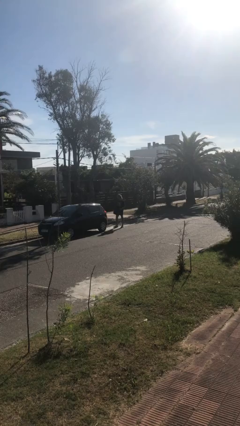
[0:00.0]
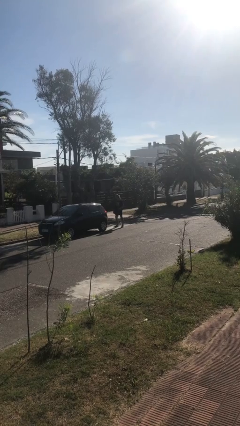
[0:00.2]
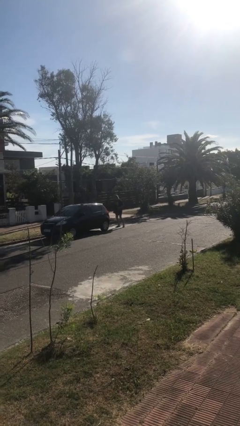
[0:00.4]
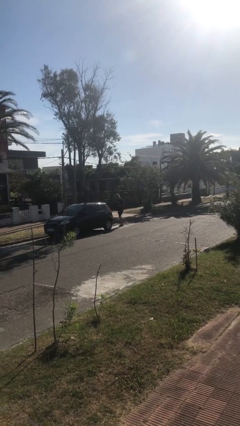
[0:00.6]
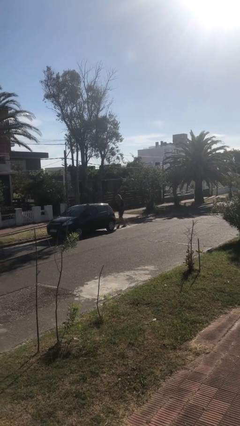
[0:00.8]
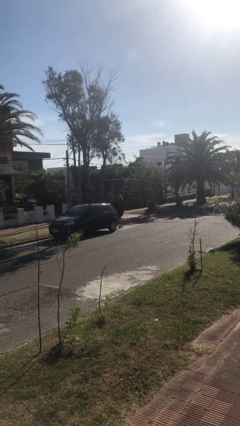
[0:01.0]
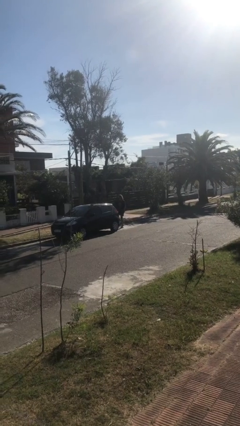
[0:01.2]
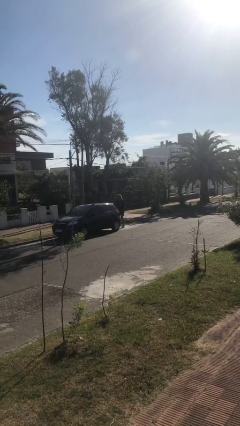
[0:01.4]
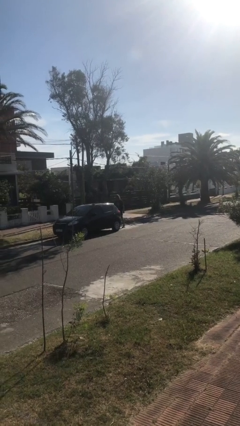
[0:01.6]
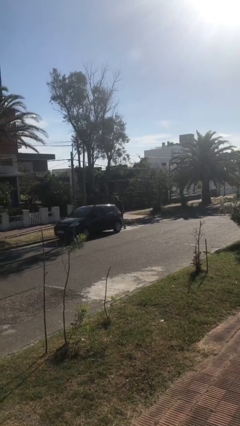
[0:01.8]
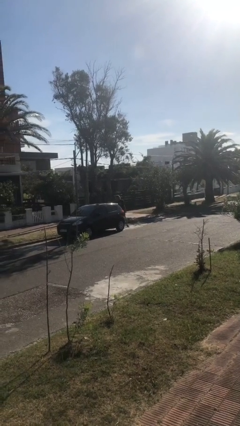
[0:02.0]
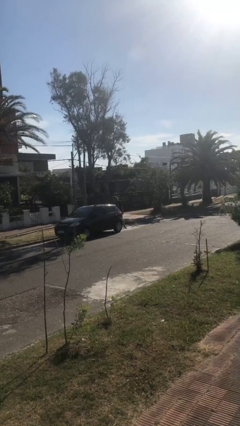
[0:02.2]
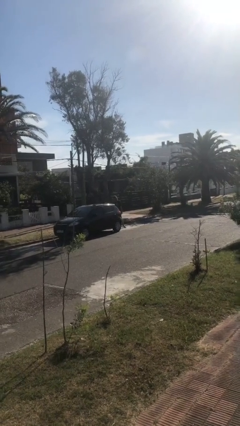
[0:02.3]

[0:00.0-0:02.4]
person loads car

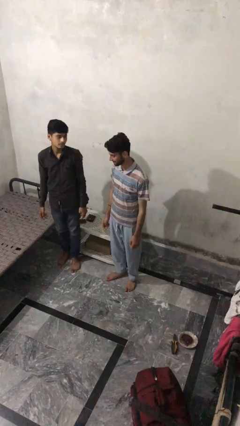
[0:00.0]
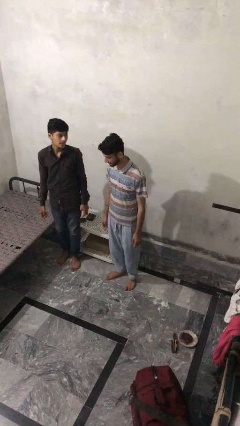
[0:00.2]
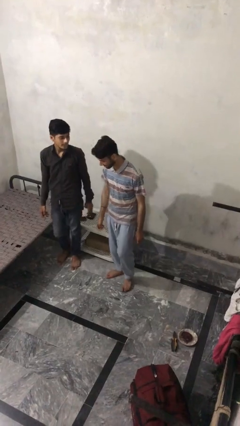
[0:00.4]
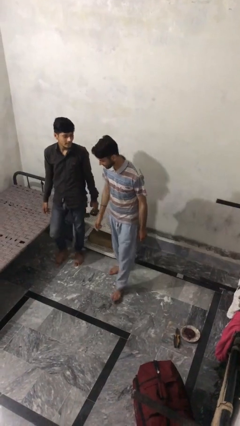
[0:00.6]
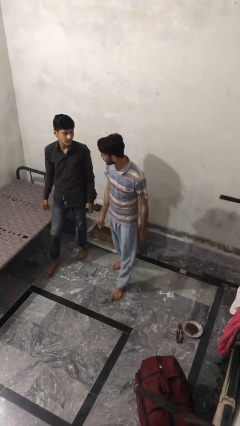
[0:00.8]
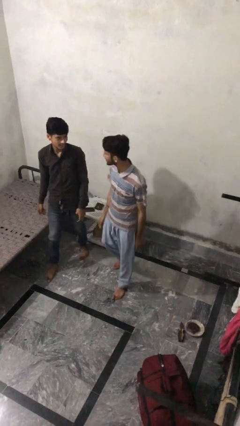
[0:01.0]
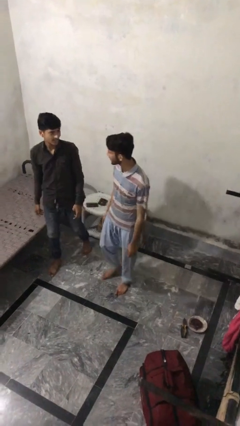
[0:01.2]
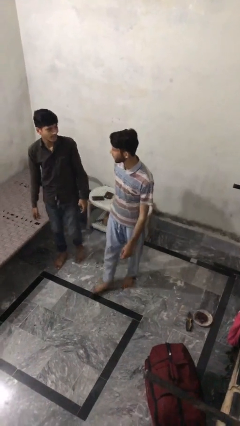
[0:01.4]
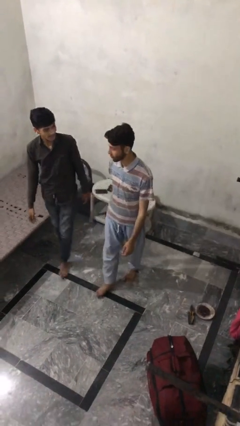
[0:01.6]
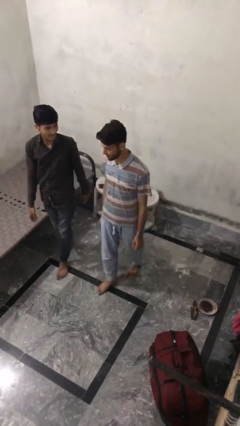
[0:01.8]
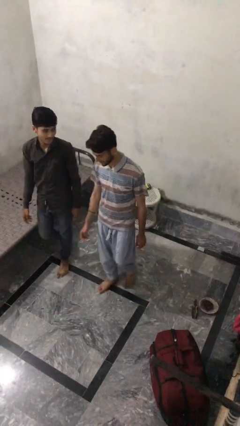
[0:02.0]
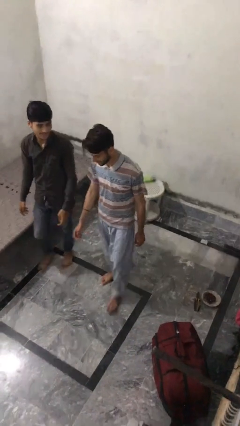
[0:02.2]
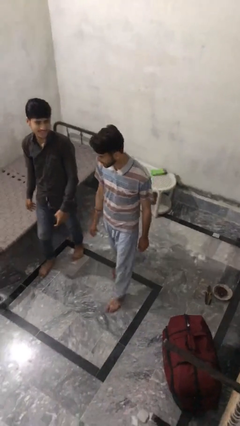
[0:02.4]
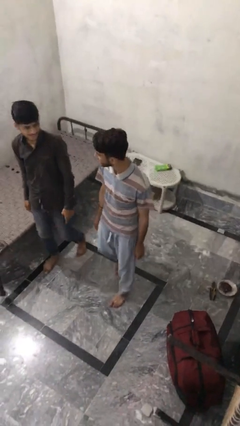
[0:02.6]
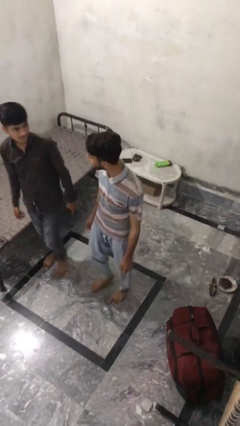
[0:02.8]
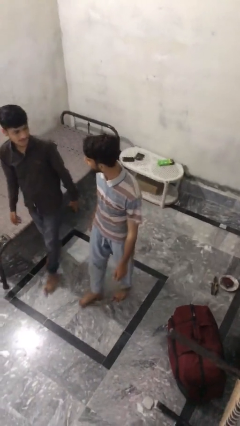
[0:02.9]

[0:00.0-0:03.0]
person talks to person

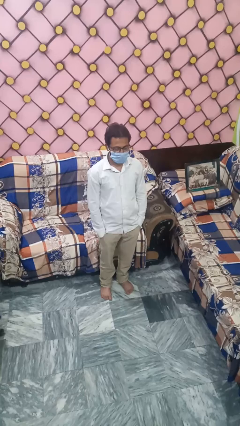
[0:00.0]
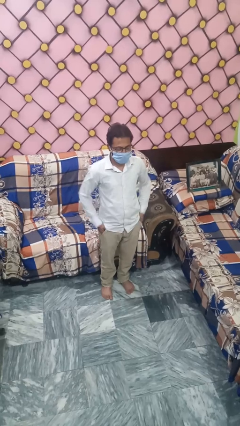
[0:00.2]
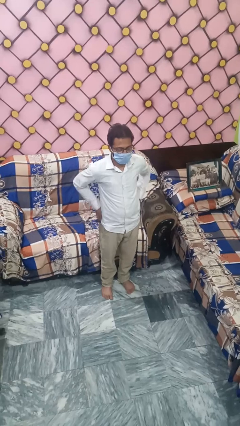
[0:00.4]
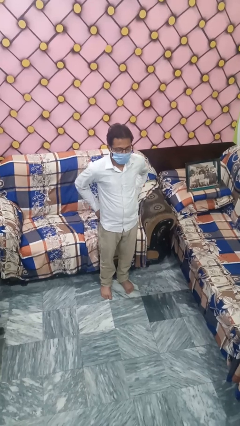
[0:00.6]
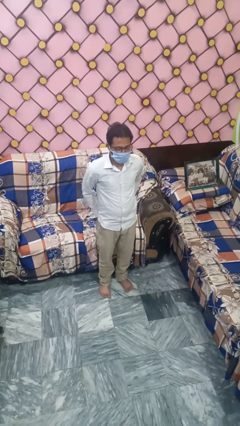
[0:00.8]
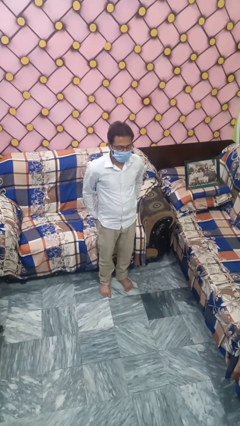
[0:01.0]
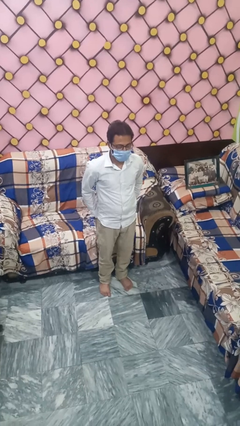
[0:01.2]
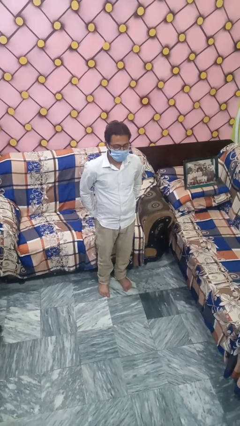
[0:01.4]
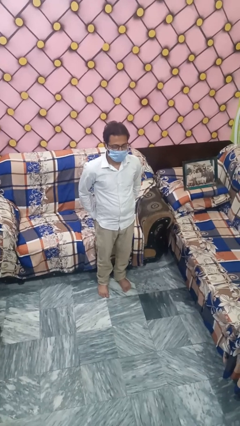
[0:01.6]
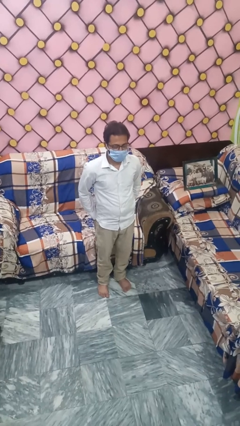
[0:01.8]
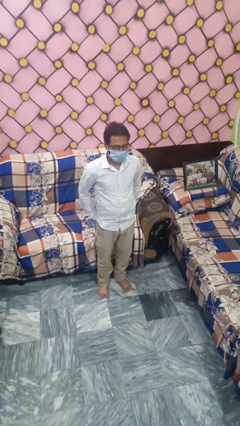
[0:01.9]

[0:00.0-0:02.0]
person puts hands in back pockets

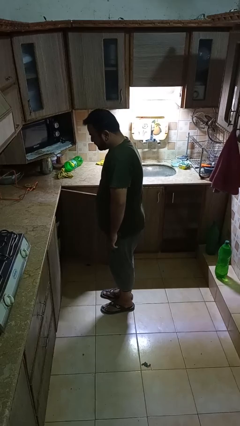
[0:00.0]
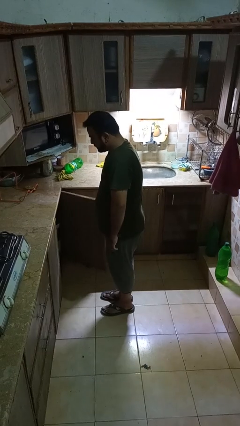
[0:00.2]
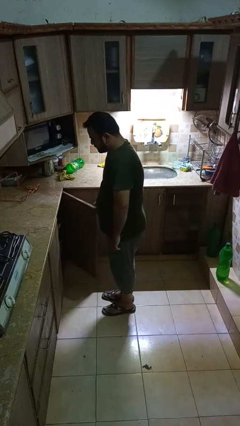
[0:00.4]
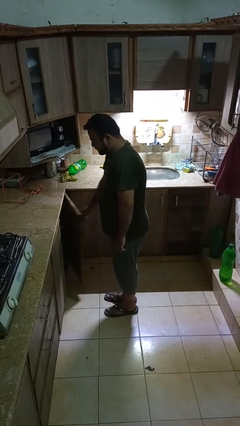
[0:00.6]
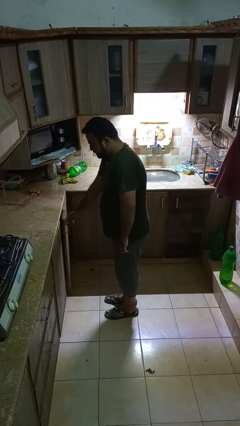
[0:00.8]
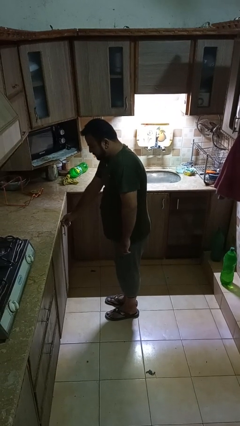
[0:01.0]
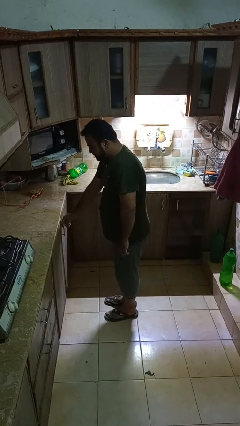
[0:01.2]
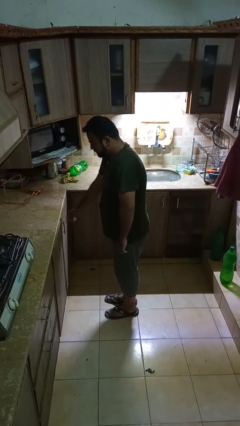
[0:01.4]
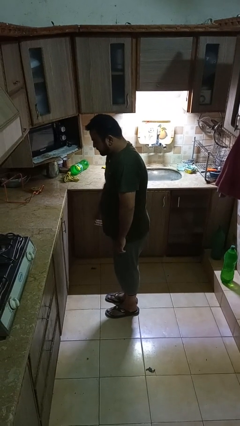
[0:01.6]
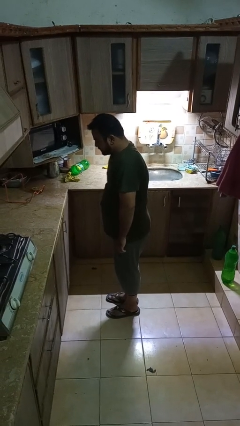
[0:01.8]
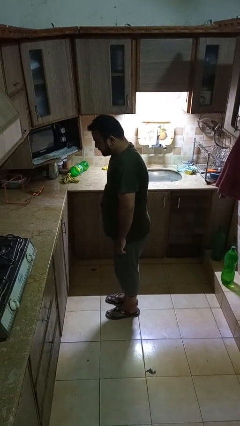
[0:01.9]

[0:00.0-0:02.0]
person closes cabinet

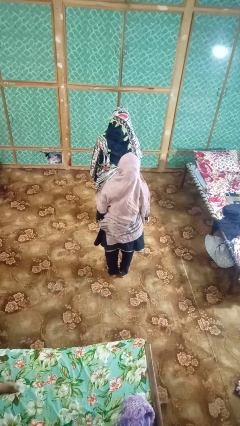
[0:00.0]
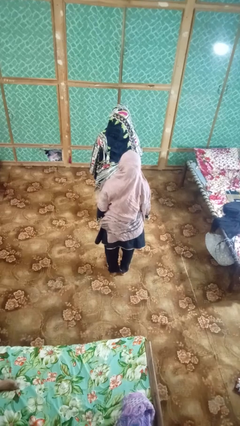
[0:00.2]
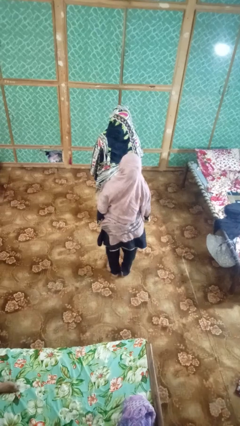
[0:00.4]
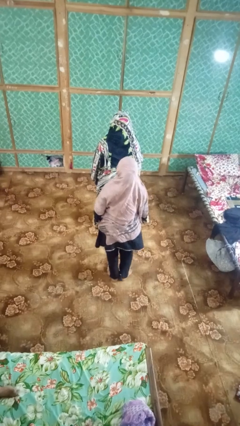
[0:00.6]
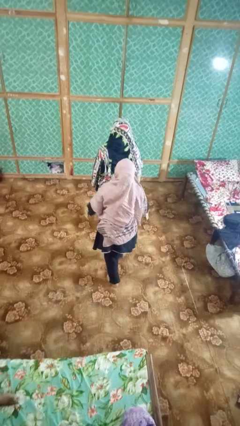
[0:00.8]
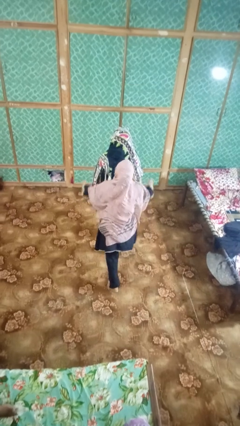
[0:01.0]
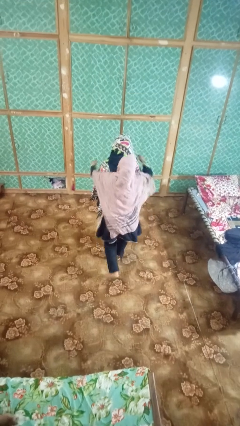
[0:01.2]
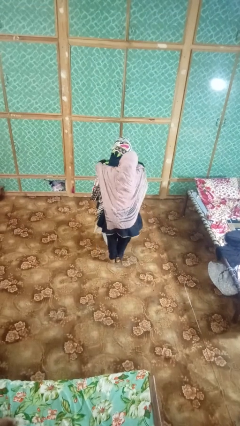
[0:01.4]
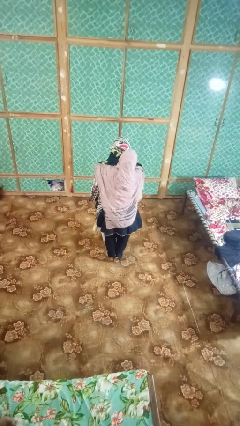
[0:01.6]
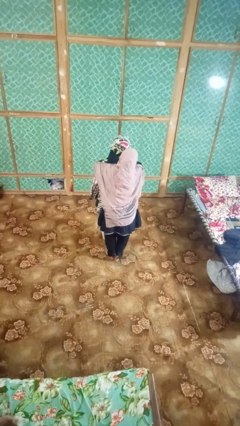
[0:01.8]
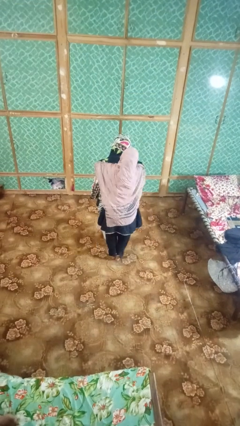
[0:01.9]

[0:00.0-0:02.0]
person hugs person from behind

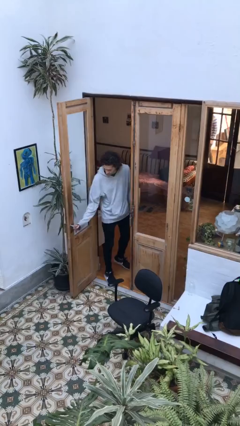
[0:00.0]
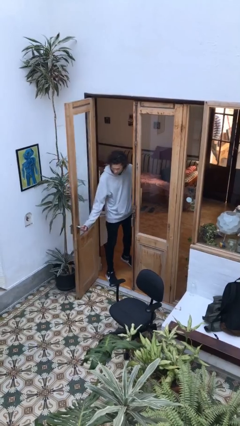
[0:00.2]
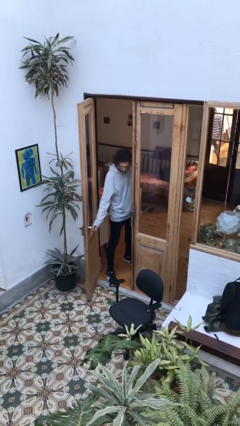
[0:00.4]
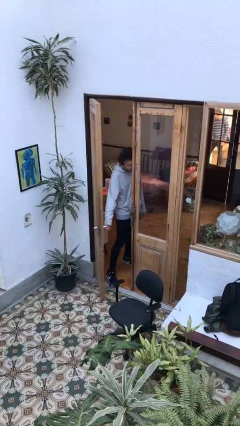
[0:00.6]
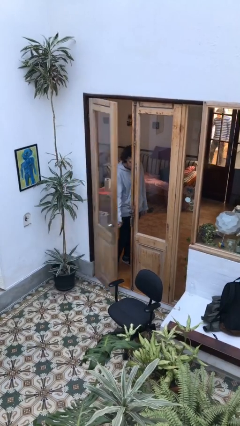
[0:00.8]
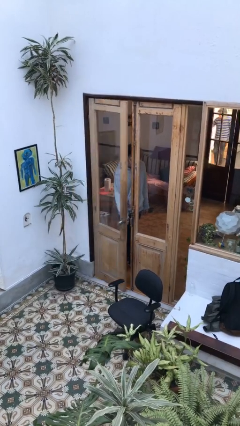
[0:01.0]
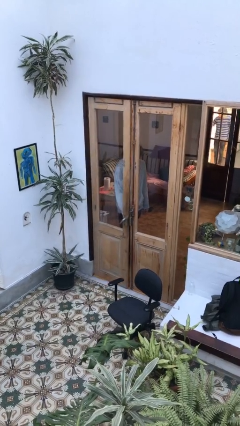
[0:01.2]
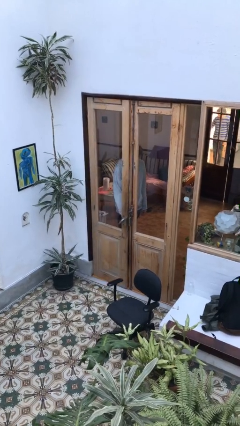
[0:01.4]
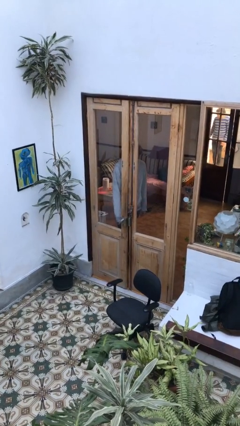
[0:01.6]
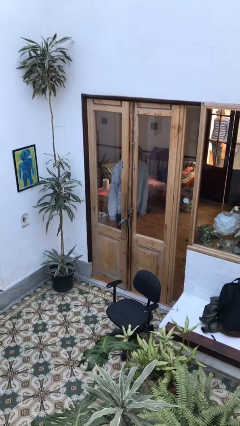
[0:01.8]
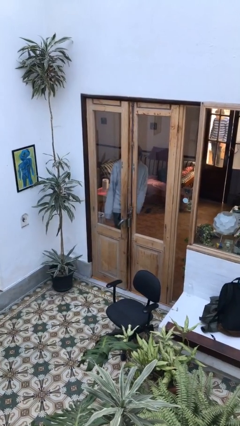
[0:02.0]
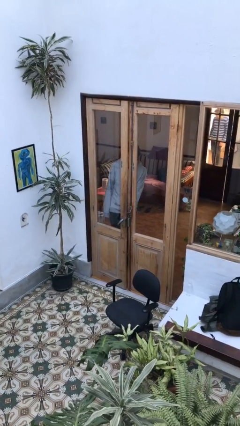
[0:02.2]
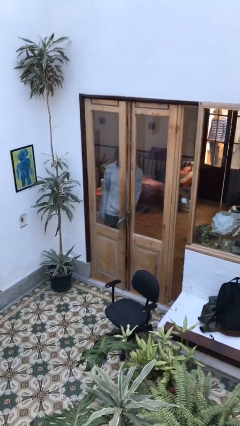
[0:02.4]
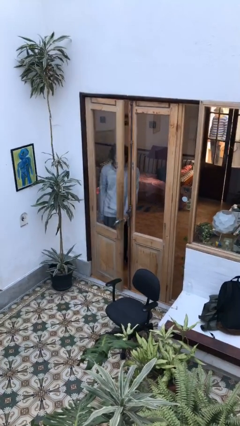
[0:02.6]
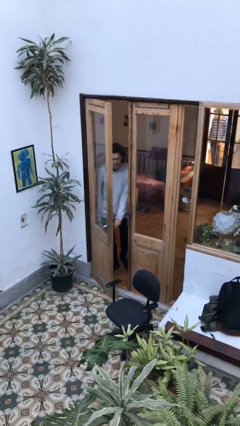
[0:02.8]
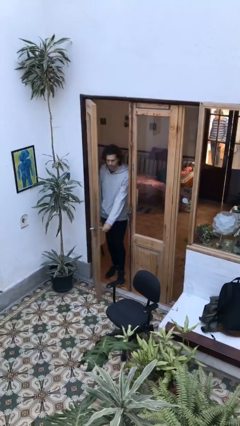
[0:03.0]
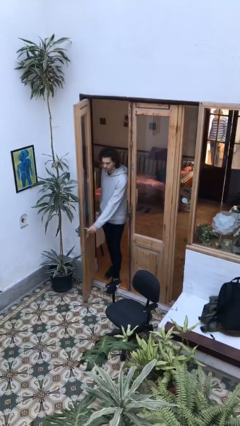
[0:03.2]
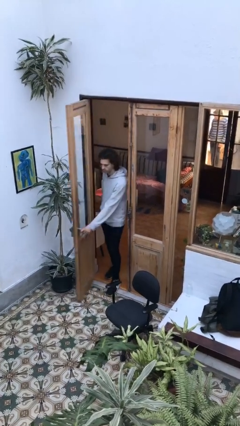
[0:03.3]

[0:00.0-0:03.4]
person closes facility door

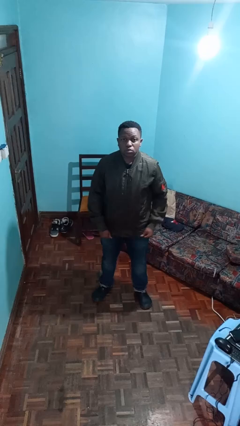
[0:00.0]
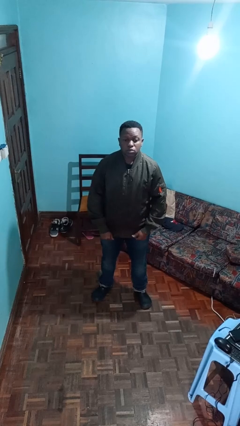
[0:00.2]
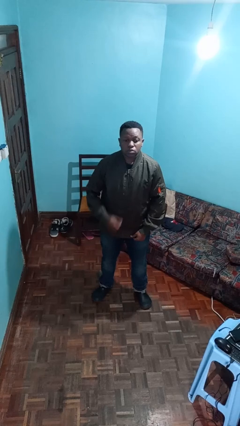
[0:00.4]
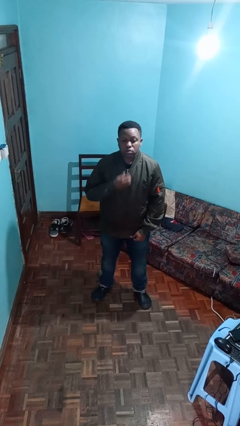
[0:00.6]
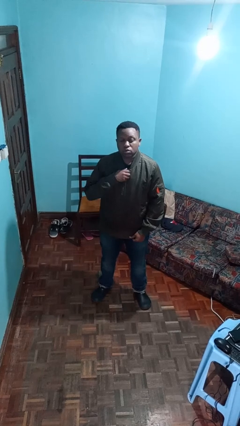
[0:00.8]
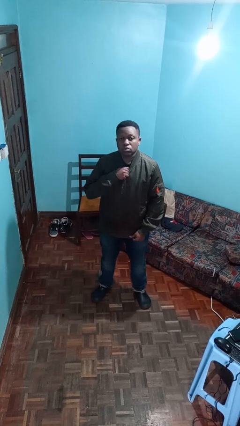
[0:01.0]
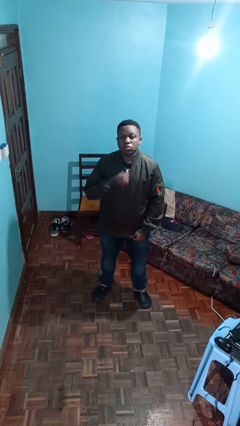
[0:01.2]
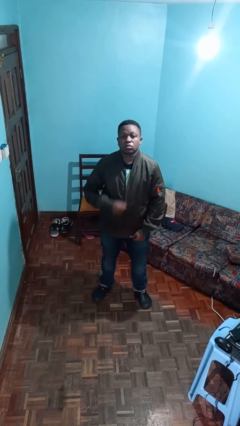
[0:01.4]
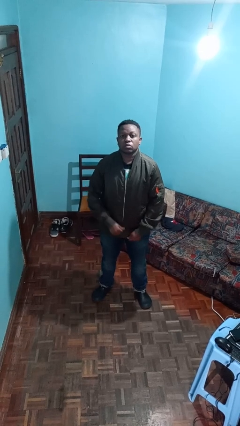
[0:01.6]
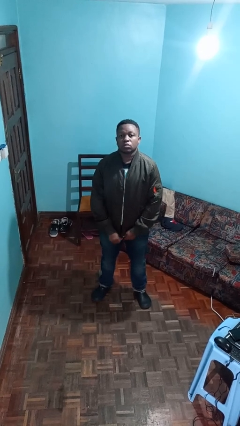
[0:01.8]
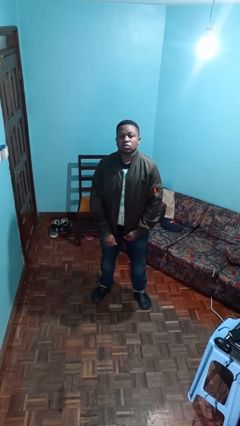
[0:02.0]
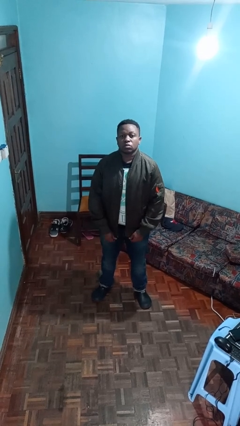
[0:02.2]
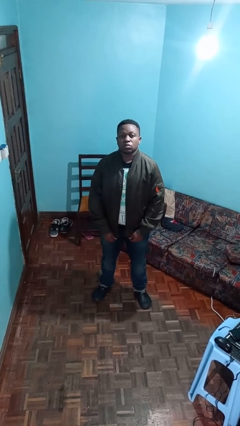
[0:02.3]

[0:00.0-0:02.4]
person unzips jacket
